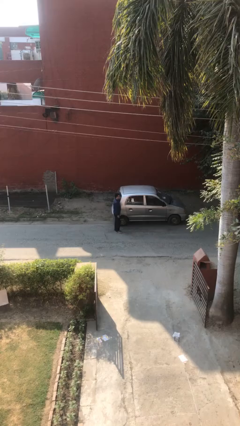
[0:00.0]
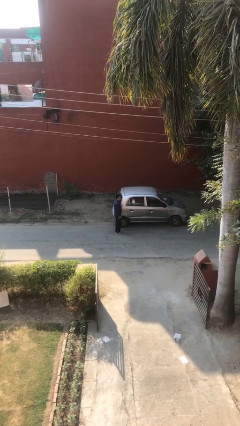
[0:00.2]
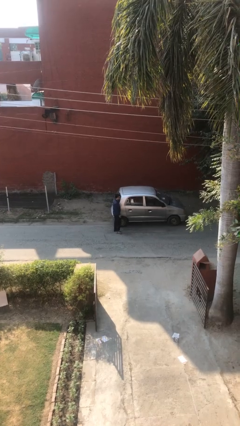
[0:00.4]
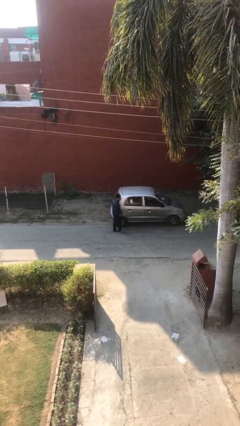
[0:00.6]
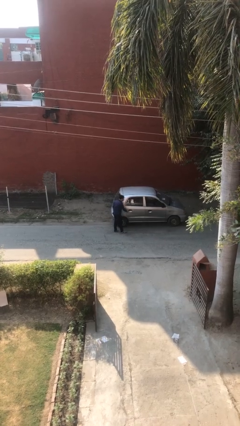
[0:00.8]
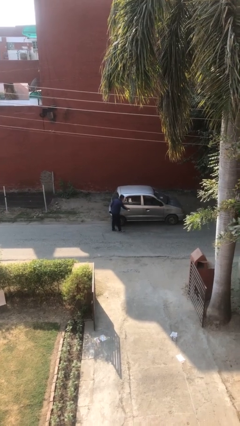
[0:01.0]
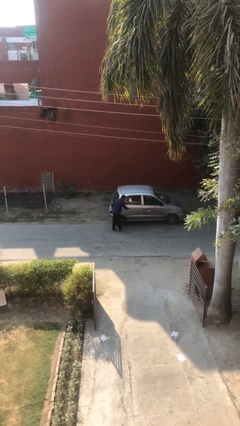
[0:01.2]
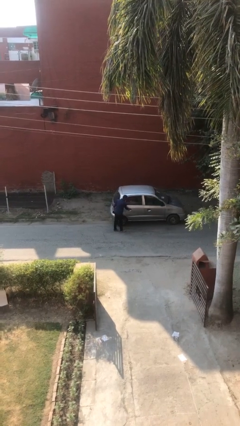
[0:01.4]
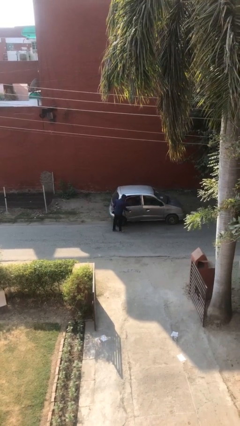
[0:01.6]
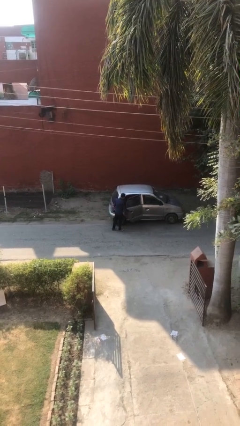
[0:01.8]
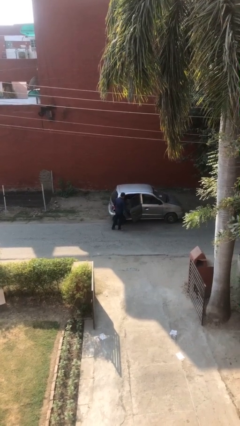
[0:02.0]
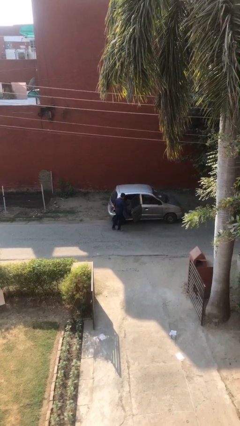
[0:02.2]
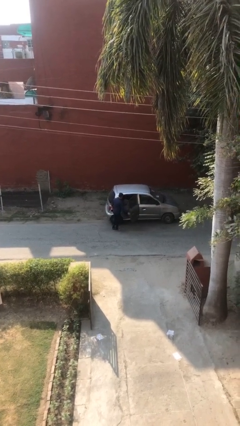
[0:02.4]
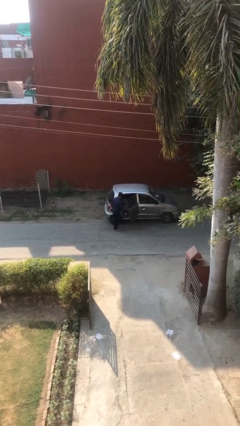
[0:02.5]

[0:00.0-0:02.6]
person opens car door

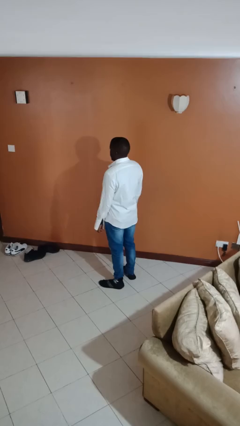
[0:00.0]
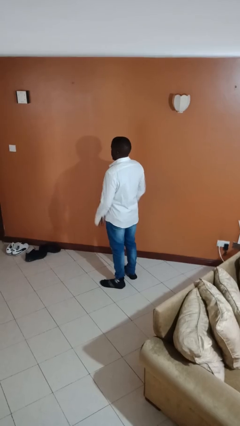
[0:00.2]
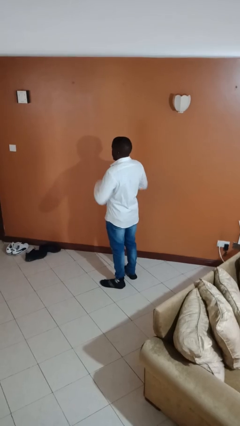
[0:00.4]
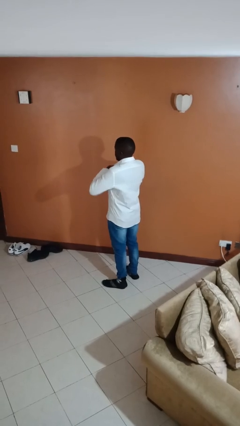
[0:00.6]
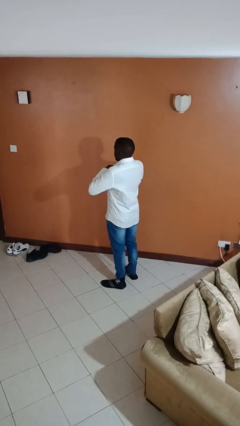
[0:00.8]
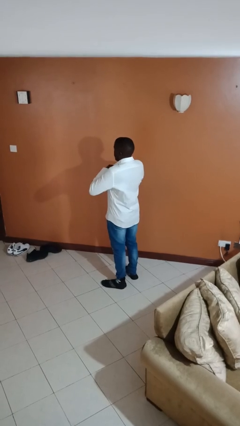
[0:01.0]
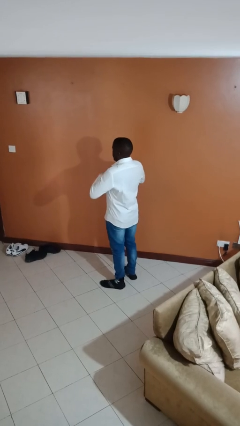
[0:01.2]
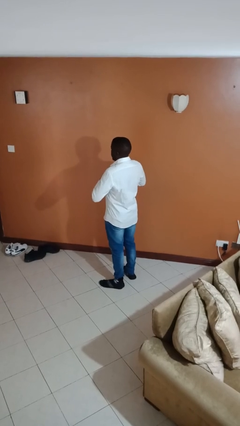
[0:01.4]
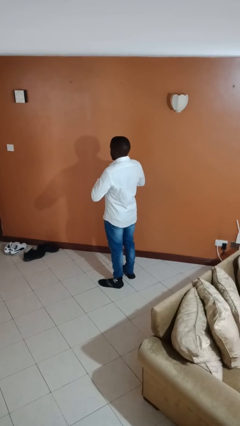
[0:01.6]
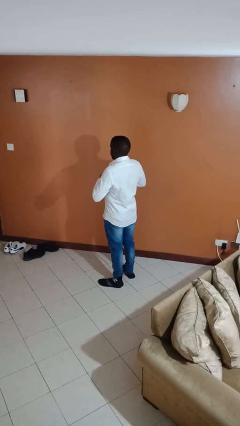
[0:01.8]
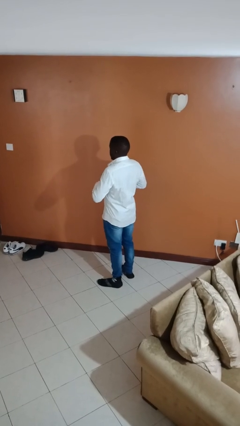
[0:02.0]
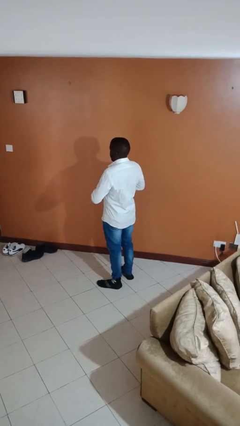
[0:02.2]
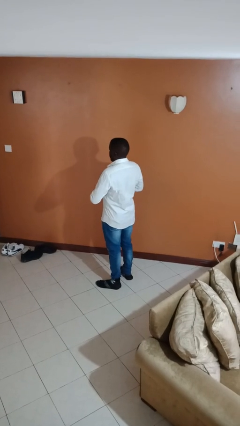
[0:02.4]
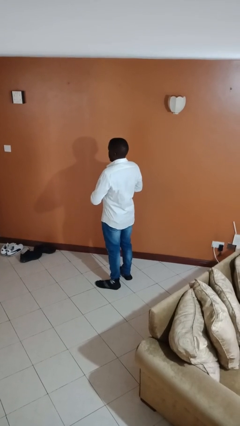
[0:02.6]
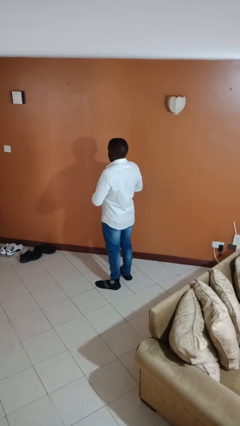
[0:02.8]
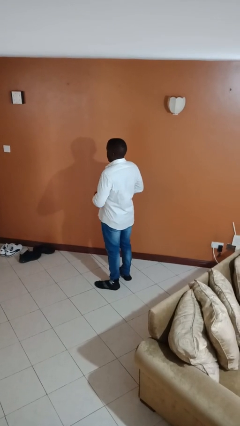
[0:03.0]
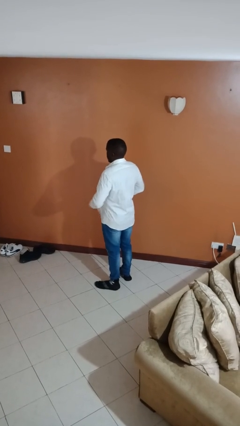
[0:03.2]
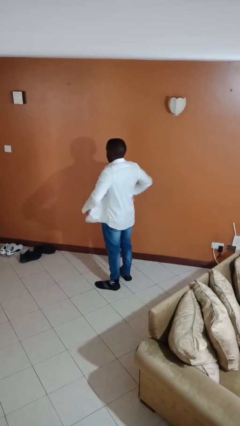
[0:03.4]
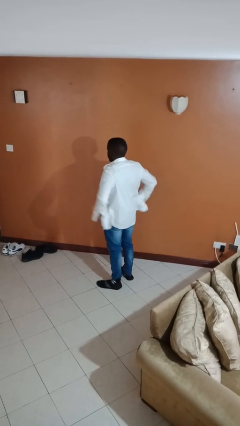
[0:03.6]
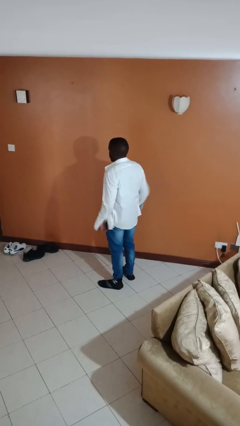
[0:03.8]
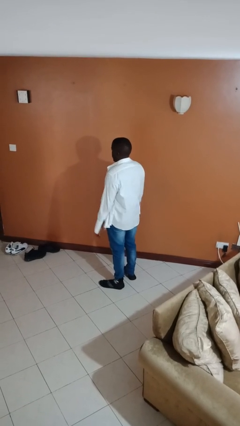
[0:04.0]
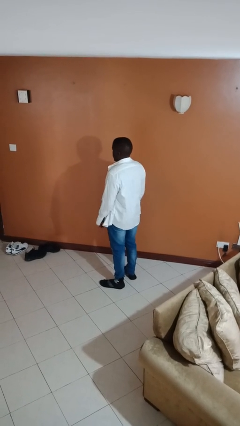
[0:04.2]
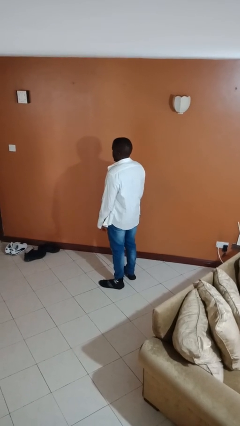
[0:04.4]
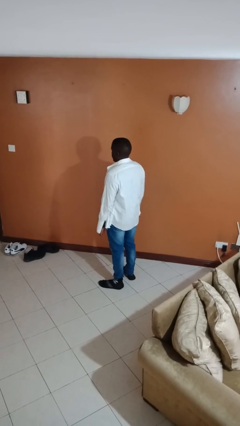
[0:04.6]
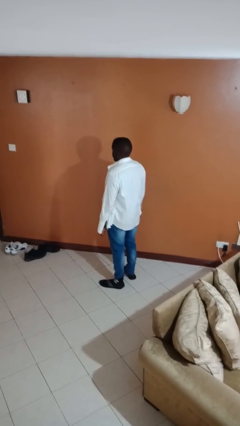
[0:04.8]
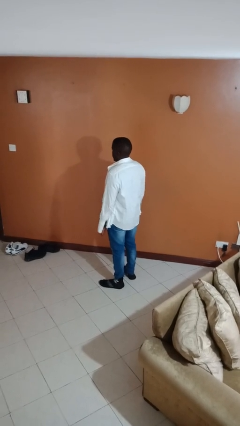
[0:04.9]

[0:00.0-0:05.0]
person unbuttons shirt

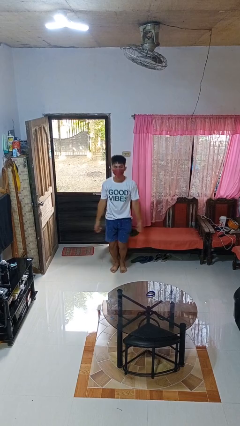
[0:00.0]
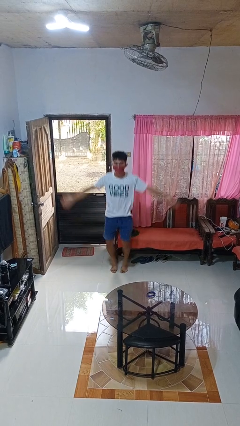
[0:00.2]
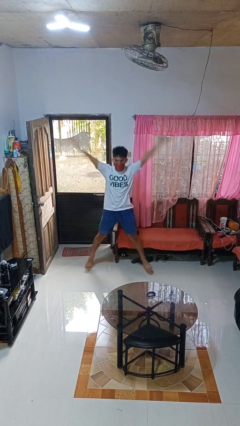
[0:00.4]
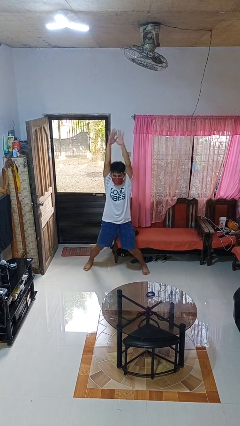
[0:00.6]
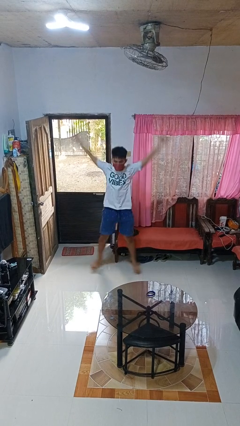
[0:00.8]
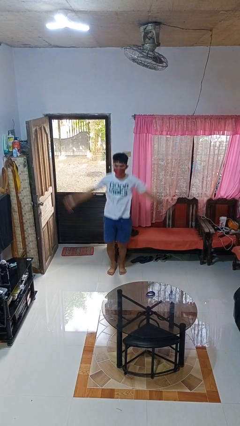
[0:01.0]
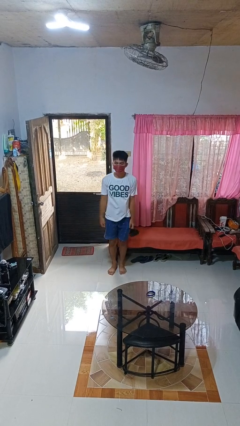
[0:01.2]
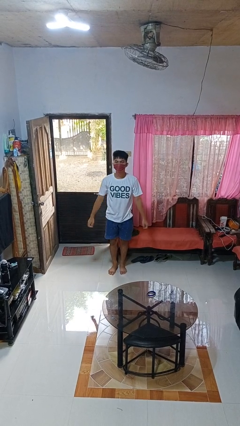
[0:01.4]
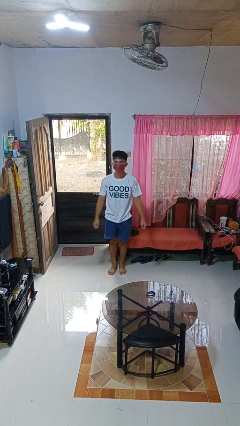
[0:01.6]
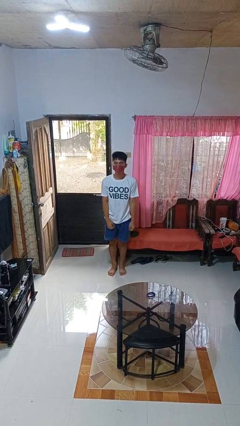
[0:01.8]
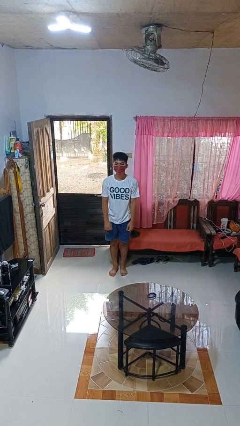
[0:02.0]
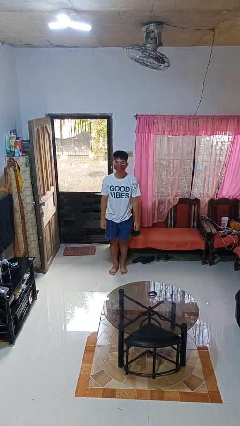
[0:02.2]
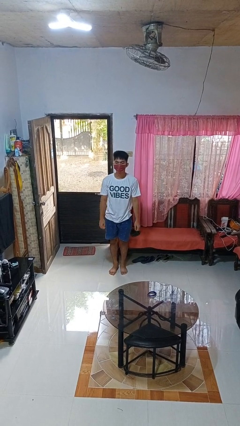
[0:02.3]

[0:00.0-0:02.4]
person exercises with jumping jacks

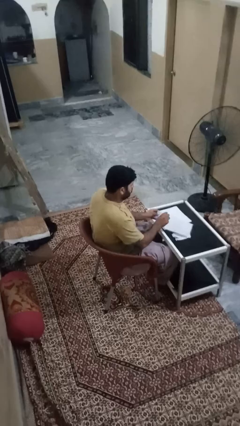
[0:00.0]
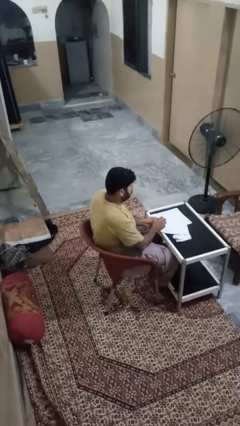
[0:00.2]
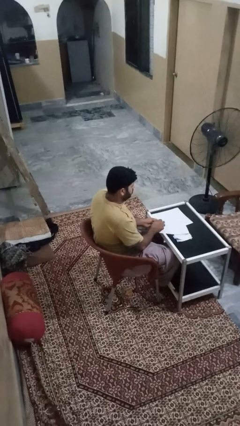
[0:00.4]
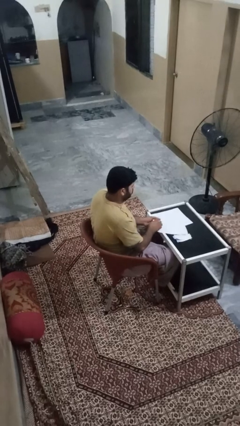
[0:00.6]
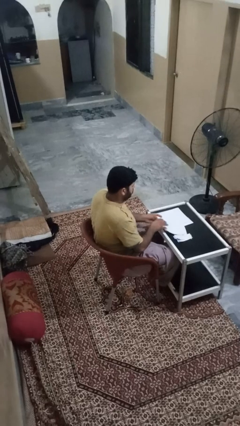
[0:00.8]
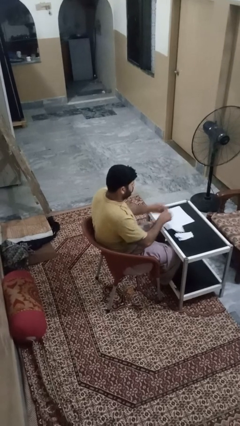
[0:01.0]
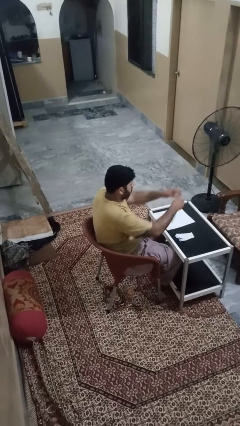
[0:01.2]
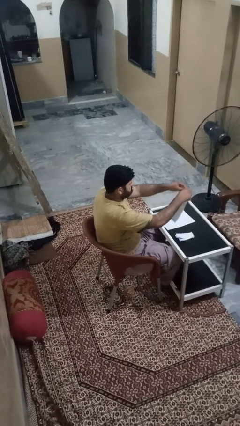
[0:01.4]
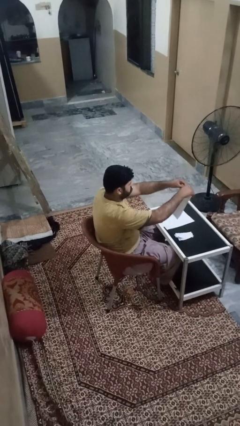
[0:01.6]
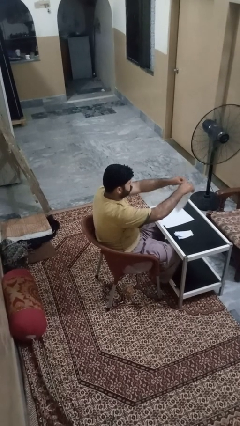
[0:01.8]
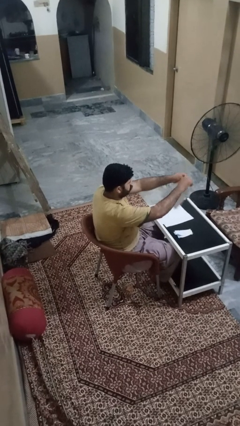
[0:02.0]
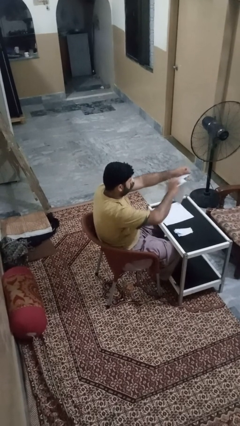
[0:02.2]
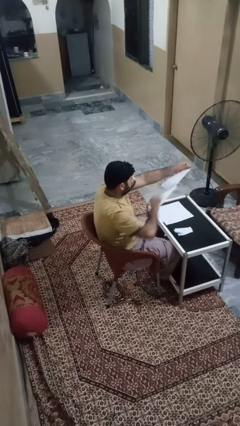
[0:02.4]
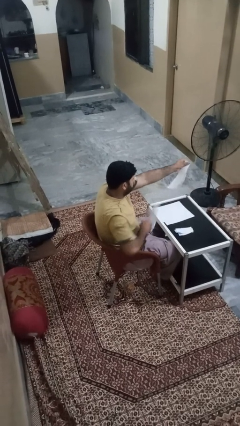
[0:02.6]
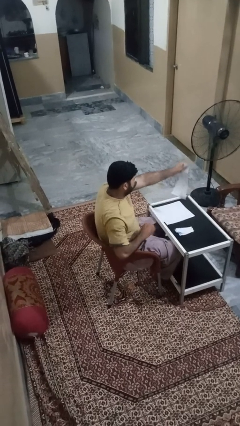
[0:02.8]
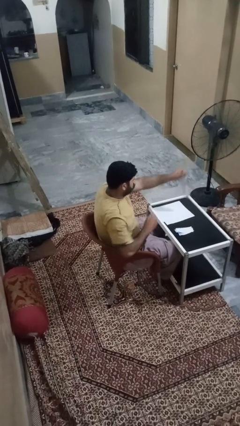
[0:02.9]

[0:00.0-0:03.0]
person tears paper

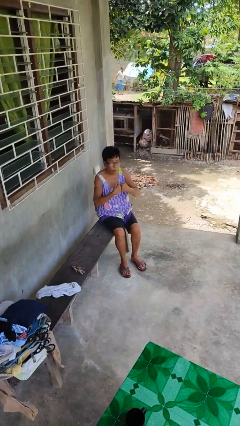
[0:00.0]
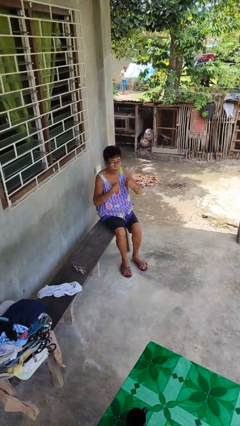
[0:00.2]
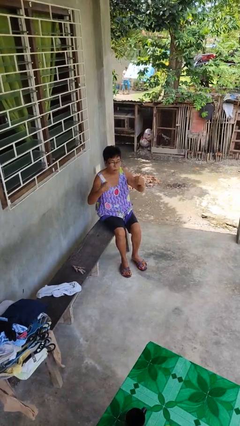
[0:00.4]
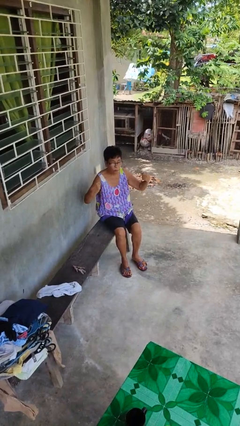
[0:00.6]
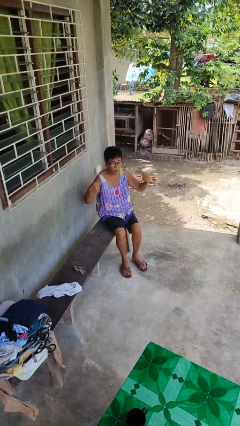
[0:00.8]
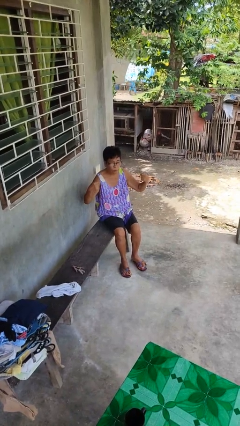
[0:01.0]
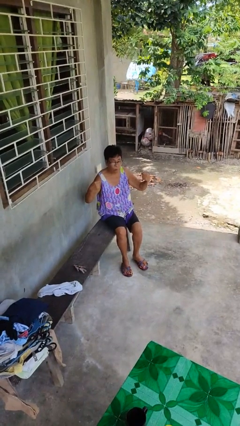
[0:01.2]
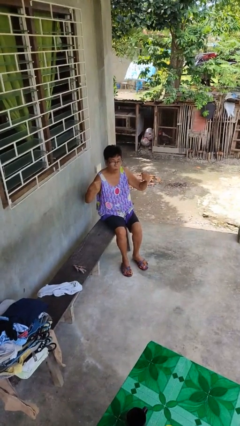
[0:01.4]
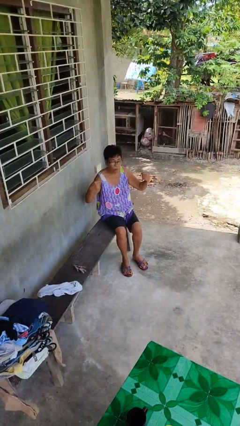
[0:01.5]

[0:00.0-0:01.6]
person gestures zoom in

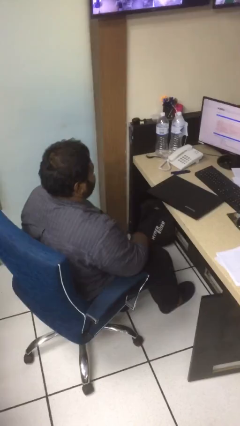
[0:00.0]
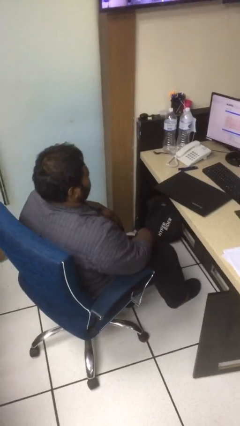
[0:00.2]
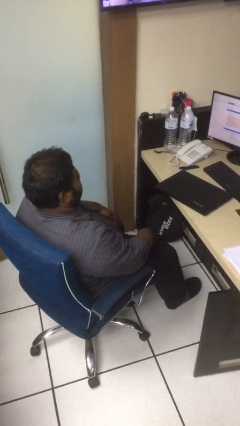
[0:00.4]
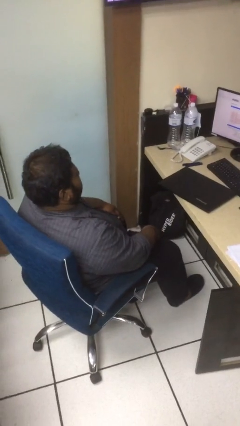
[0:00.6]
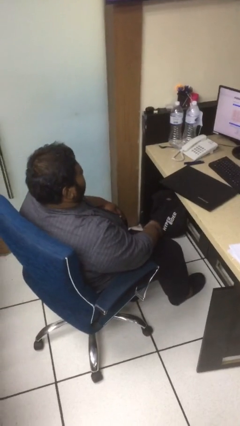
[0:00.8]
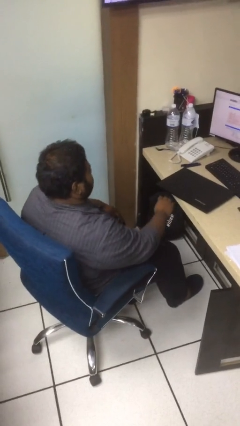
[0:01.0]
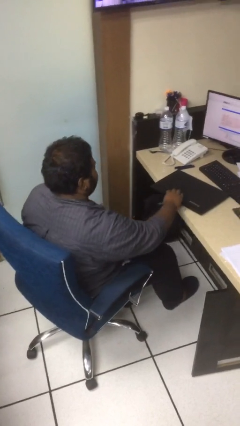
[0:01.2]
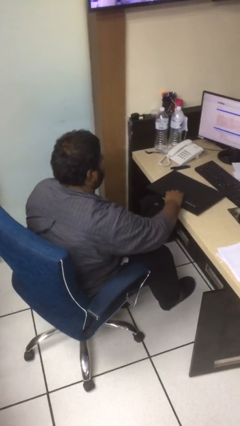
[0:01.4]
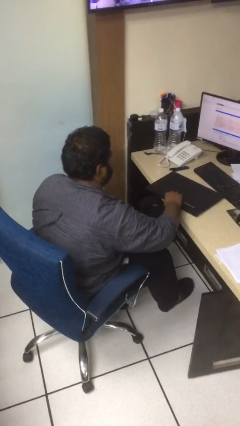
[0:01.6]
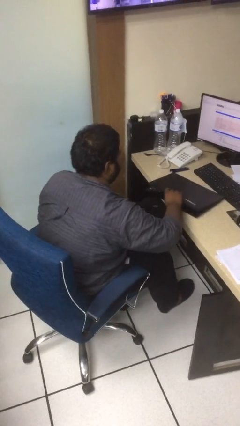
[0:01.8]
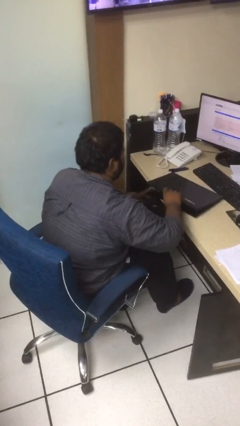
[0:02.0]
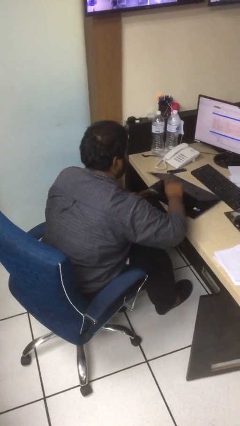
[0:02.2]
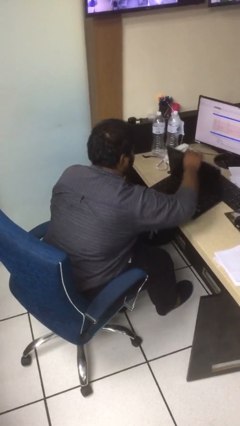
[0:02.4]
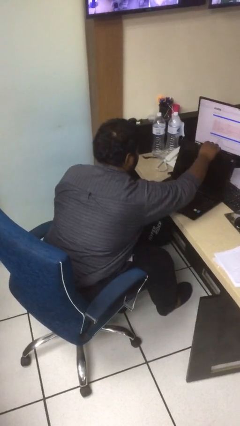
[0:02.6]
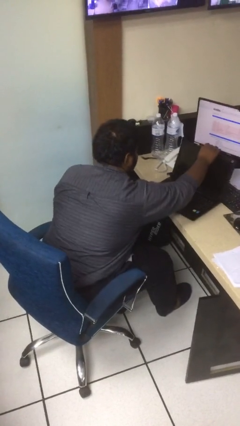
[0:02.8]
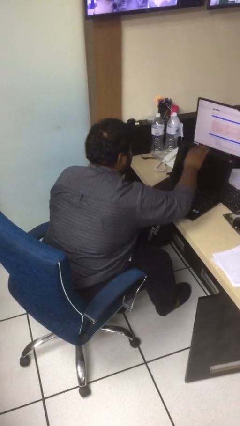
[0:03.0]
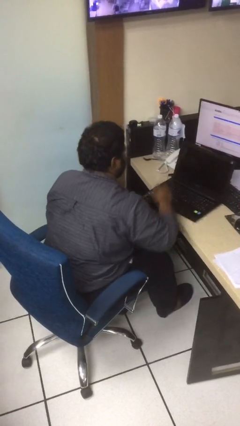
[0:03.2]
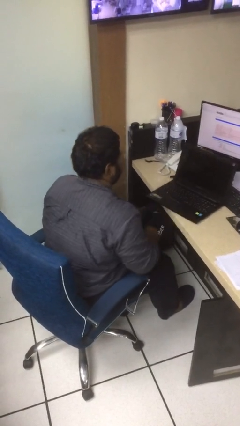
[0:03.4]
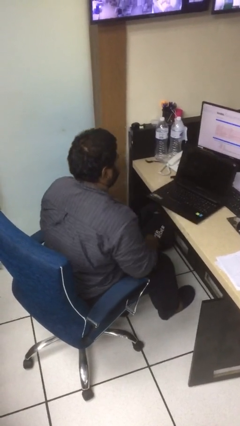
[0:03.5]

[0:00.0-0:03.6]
person opens laptop
